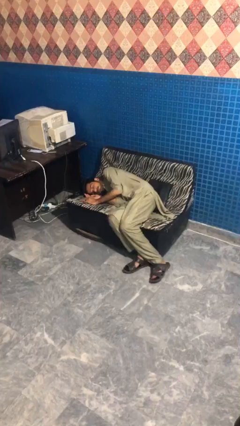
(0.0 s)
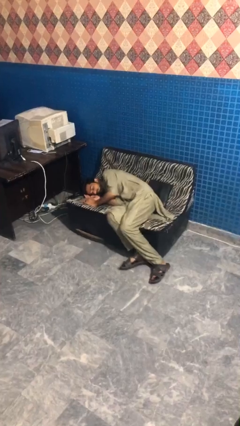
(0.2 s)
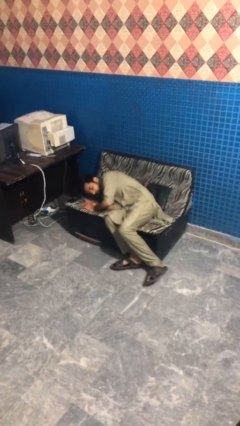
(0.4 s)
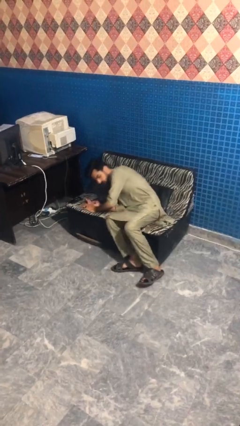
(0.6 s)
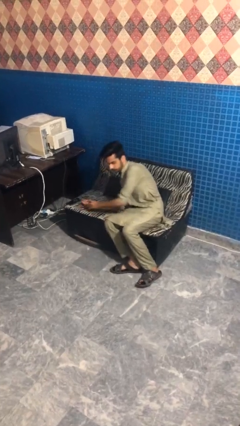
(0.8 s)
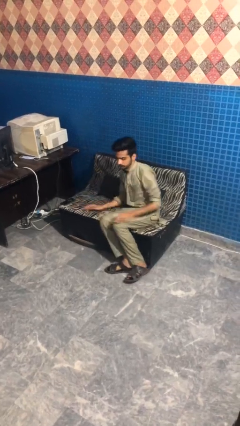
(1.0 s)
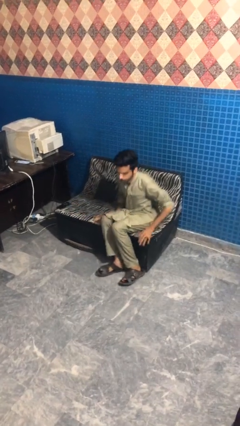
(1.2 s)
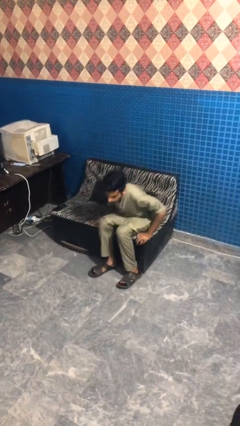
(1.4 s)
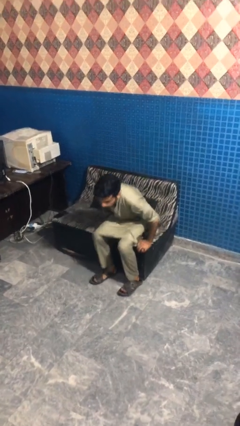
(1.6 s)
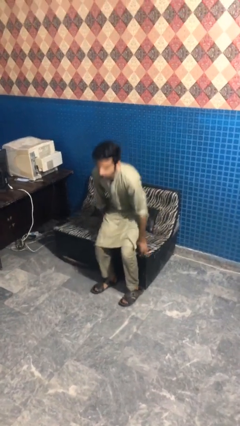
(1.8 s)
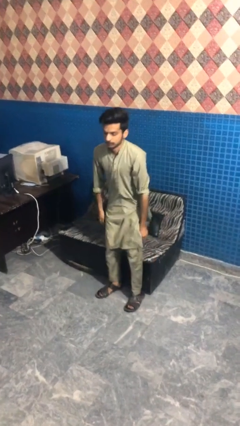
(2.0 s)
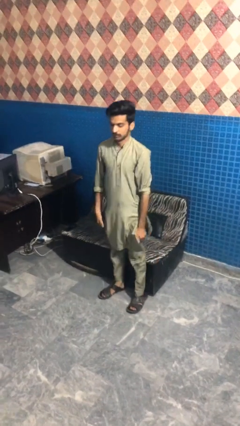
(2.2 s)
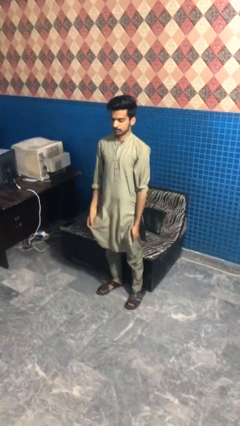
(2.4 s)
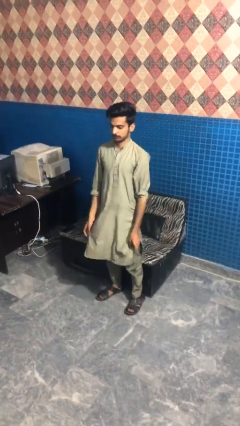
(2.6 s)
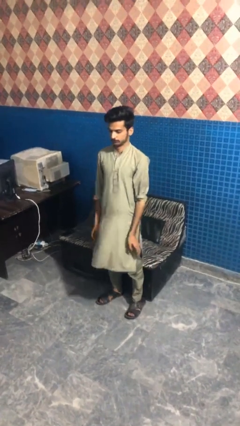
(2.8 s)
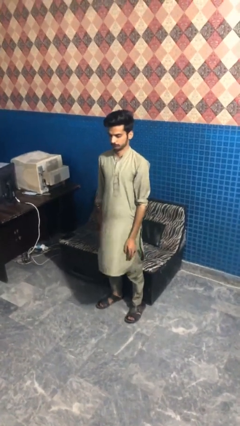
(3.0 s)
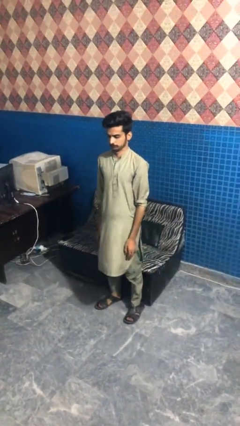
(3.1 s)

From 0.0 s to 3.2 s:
person stands up

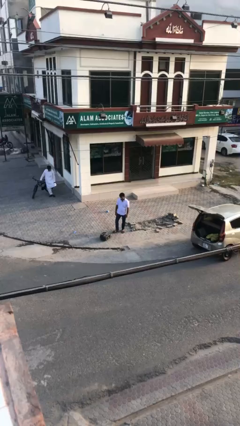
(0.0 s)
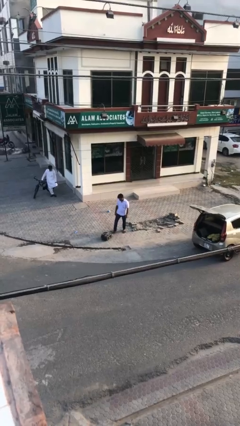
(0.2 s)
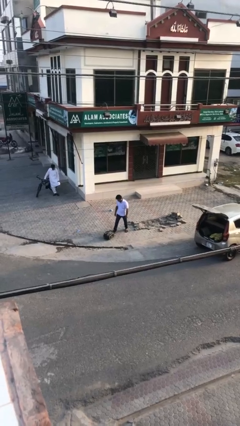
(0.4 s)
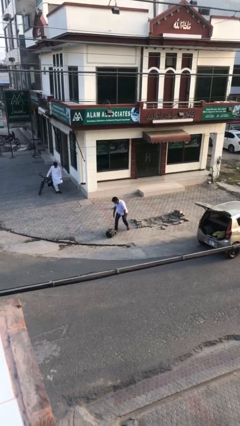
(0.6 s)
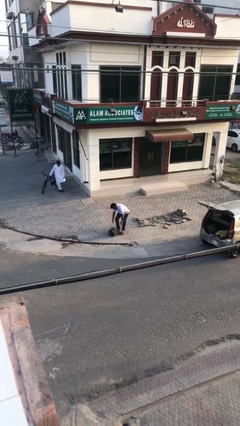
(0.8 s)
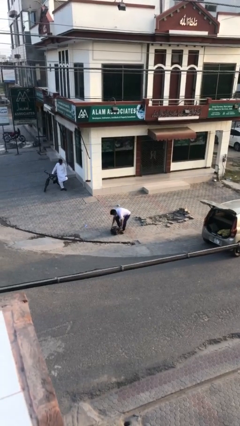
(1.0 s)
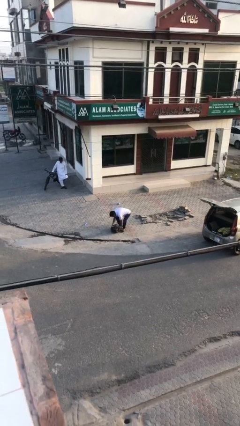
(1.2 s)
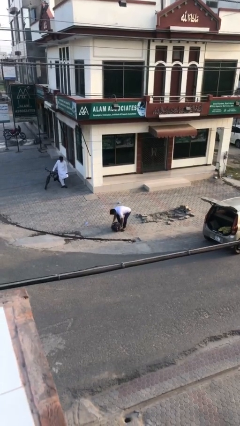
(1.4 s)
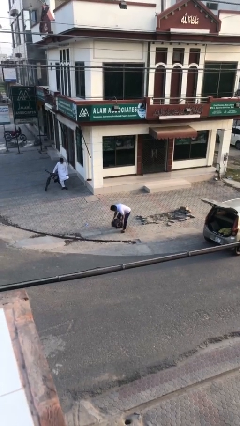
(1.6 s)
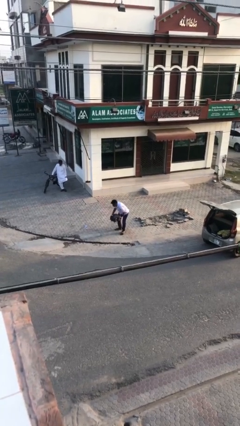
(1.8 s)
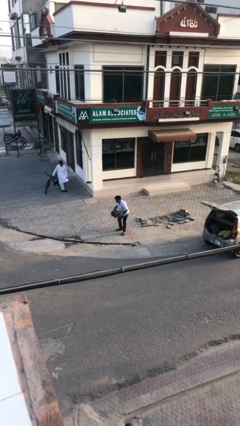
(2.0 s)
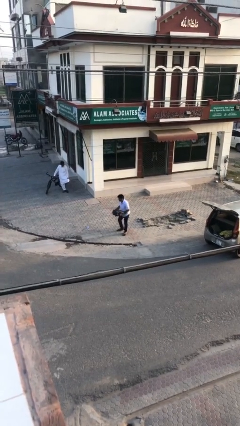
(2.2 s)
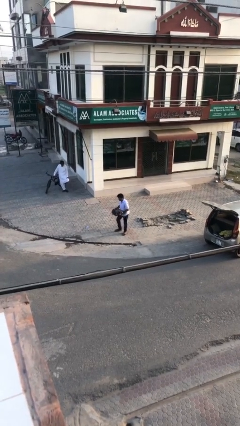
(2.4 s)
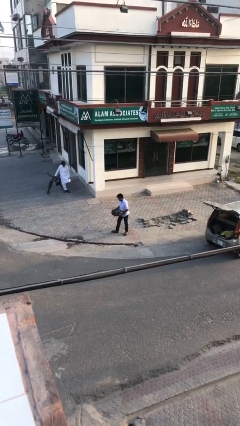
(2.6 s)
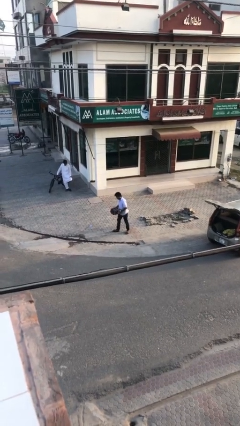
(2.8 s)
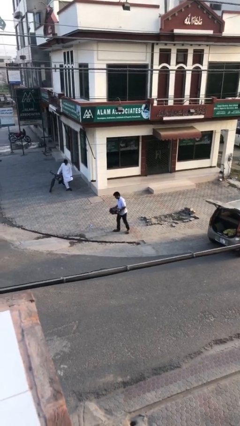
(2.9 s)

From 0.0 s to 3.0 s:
person picks up object from floor

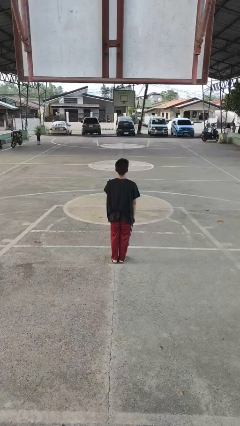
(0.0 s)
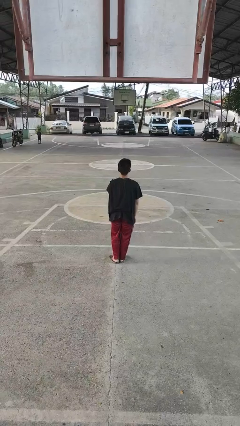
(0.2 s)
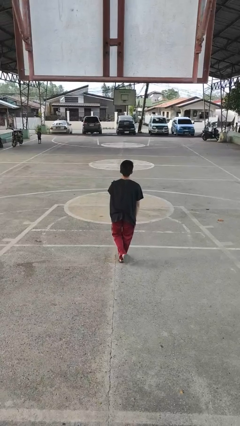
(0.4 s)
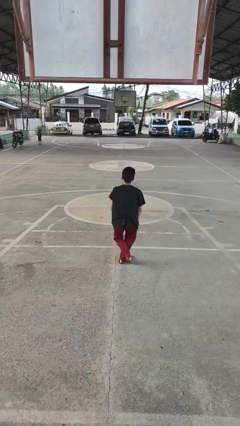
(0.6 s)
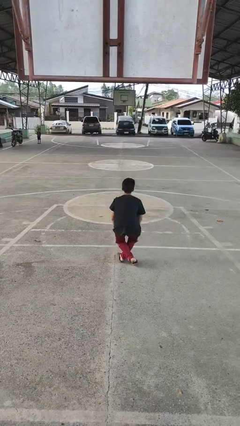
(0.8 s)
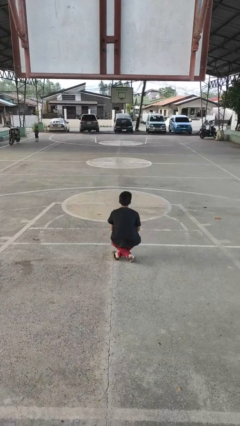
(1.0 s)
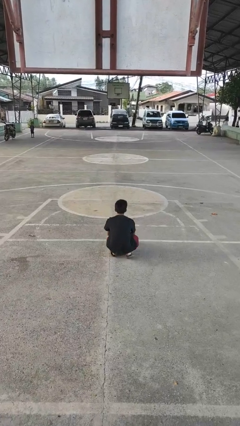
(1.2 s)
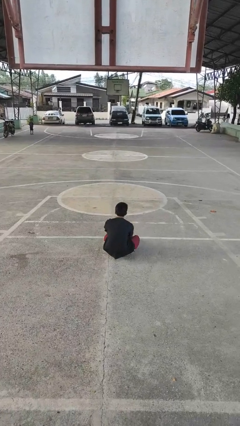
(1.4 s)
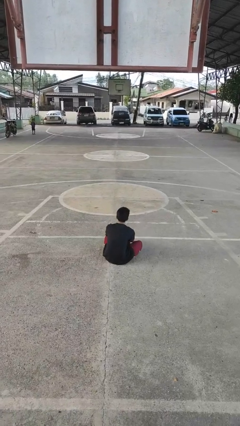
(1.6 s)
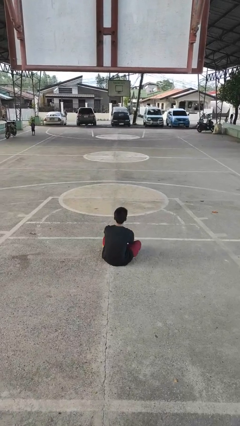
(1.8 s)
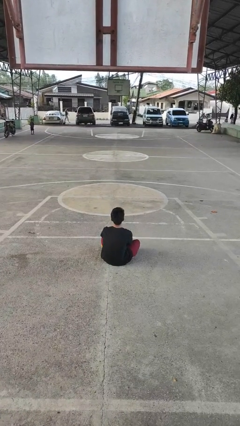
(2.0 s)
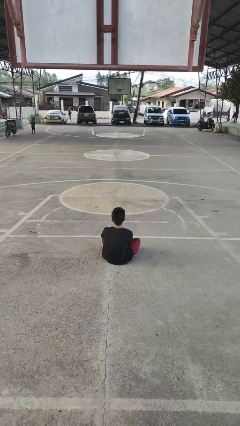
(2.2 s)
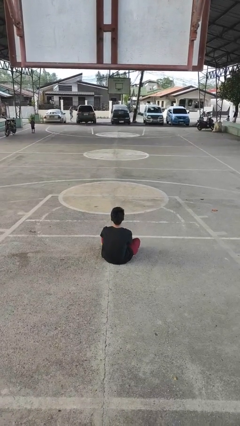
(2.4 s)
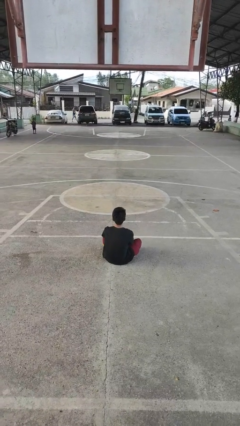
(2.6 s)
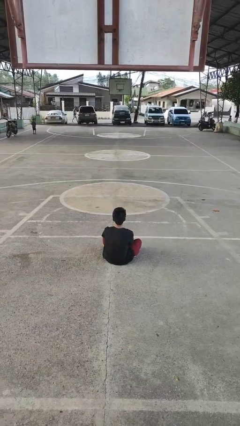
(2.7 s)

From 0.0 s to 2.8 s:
person sits crisscross

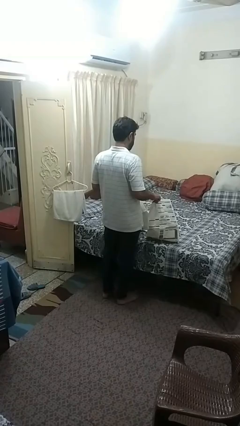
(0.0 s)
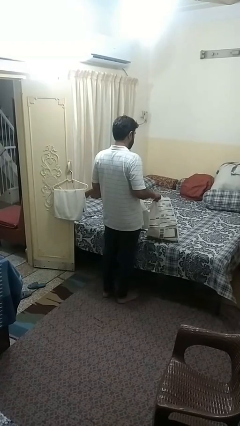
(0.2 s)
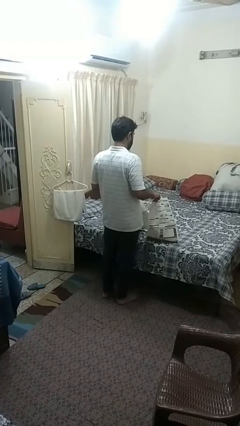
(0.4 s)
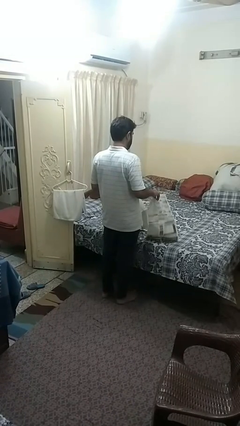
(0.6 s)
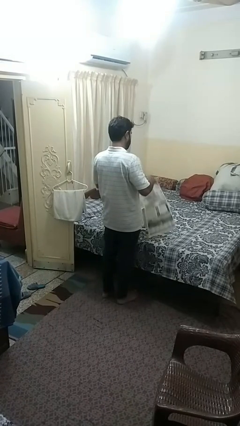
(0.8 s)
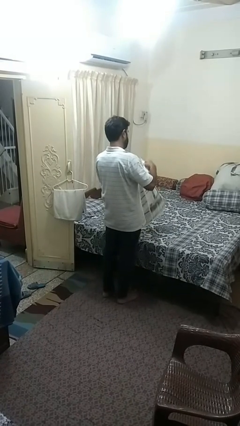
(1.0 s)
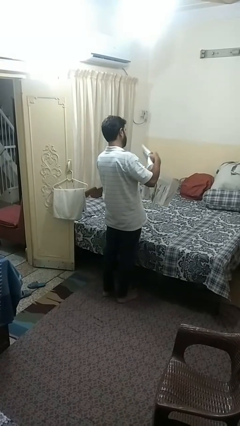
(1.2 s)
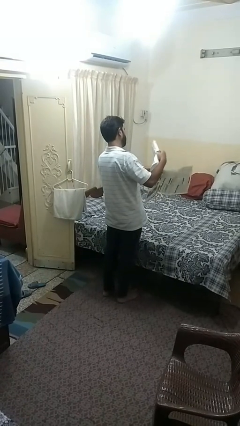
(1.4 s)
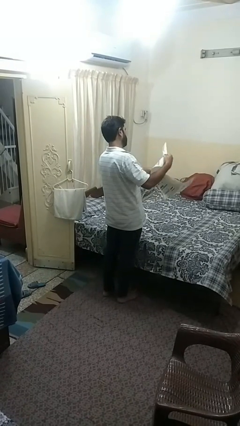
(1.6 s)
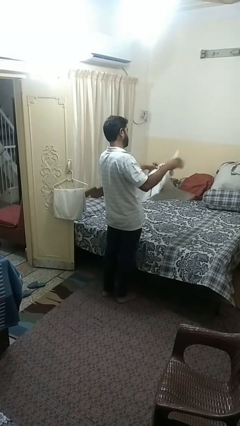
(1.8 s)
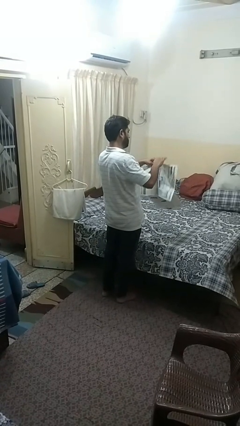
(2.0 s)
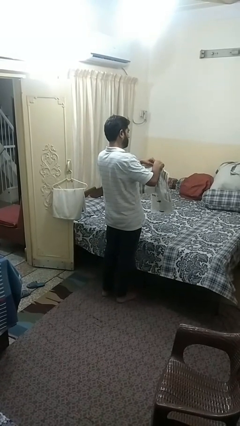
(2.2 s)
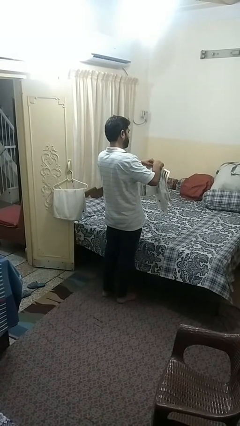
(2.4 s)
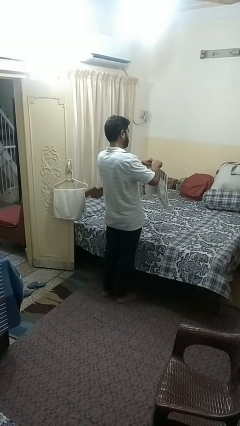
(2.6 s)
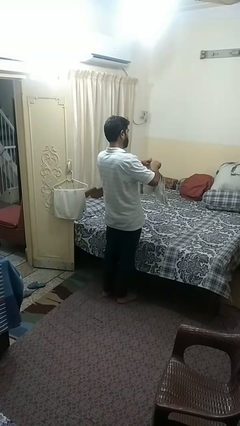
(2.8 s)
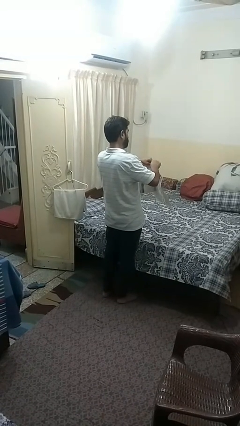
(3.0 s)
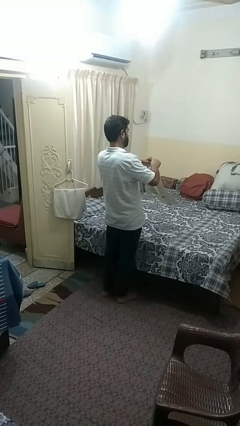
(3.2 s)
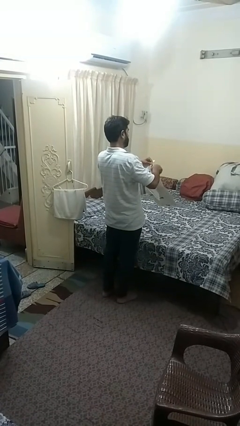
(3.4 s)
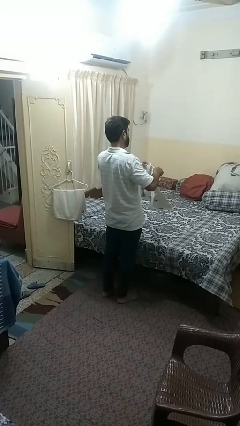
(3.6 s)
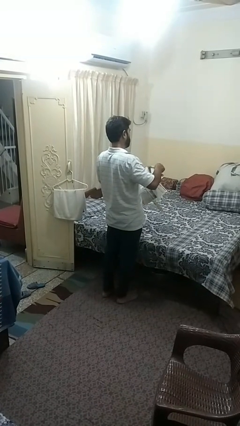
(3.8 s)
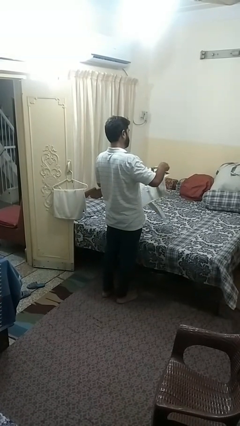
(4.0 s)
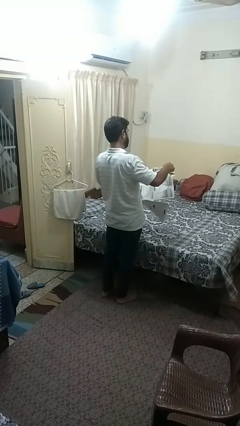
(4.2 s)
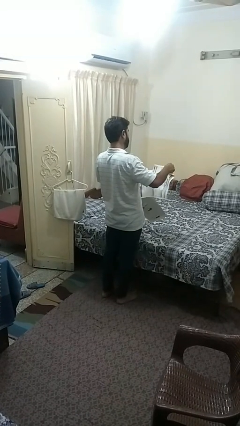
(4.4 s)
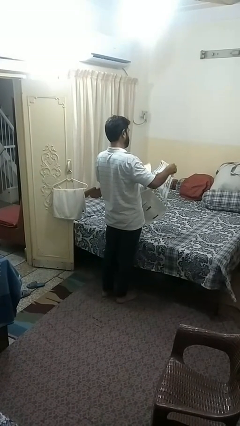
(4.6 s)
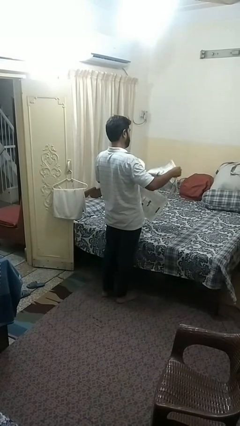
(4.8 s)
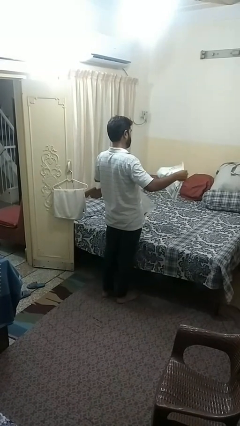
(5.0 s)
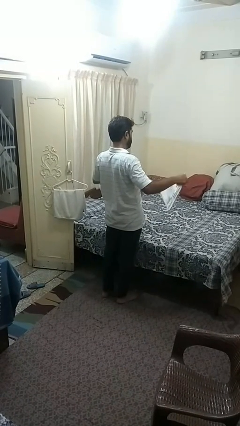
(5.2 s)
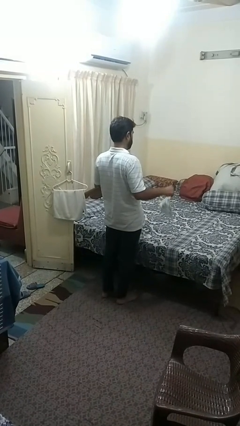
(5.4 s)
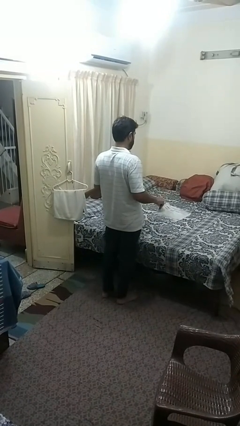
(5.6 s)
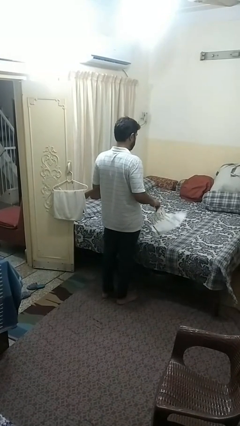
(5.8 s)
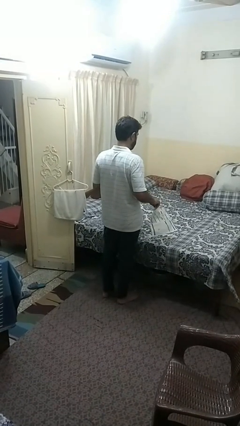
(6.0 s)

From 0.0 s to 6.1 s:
person tears paper

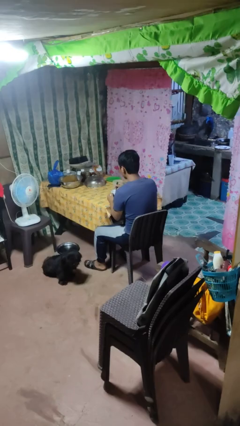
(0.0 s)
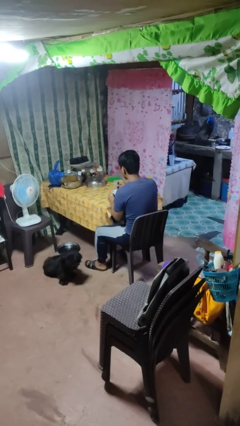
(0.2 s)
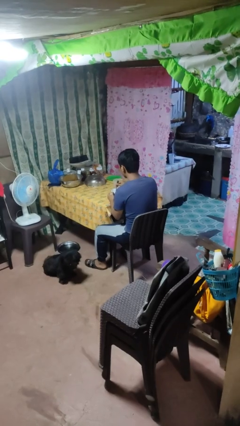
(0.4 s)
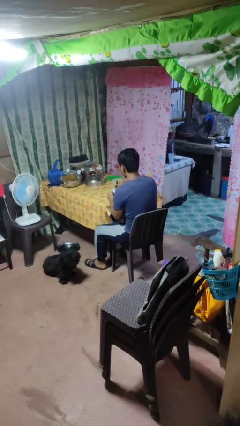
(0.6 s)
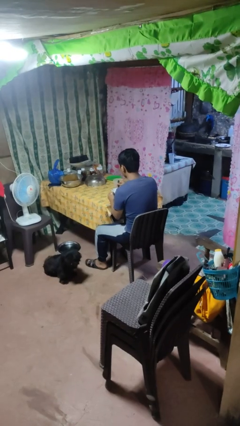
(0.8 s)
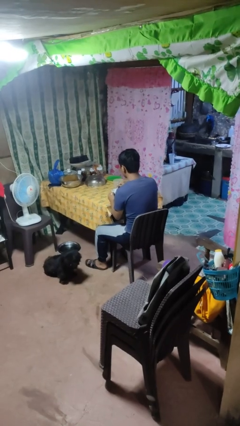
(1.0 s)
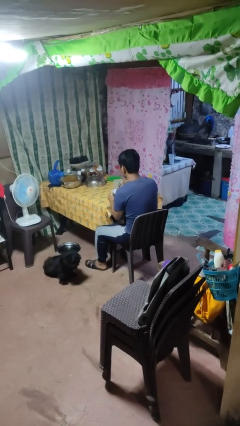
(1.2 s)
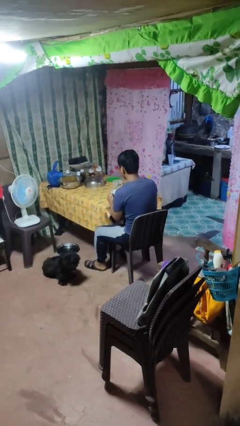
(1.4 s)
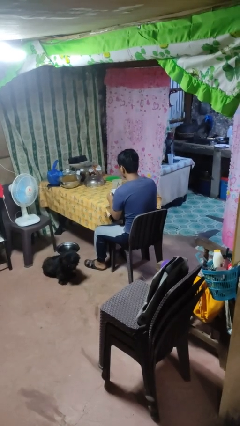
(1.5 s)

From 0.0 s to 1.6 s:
person stirs mug

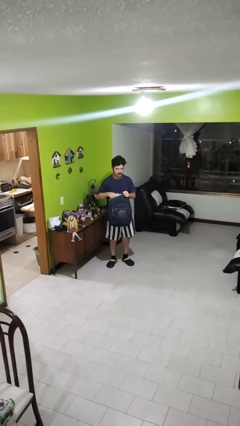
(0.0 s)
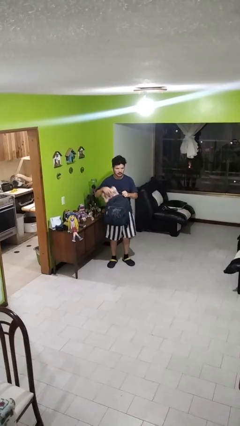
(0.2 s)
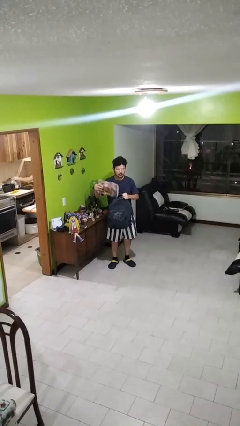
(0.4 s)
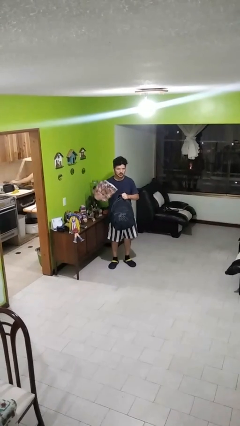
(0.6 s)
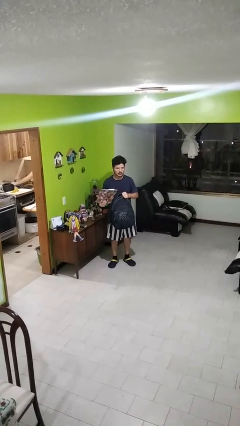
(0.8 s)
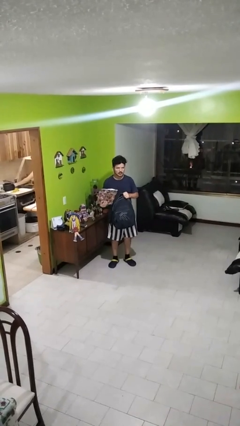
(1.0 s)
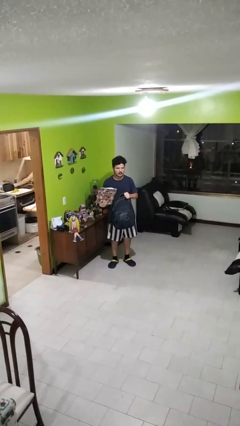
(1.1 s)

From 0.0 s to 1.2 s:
person takes object from backpack

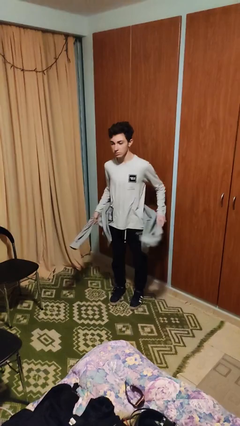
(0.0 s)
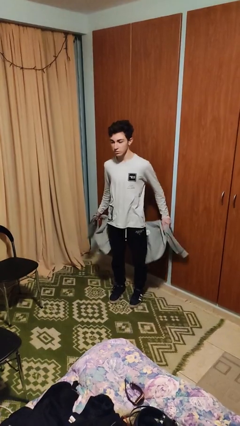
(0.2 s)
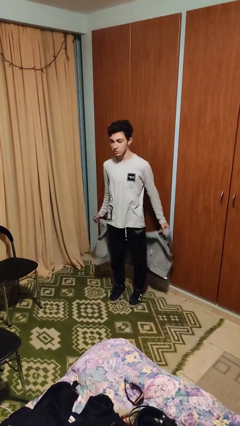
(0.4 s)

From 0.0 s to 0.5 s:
person unties jacket around waist
